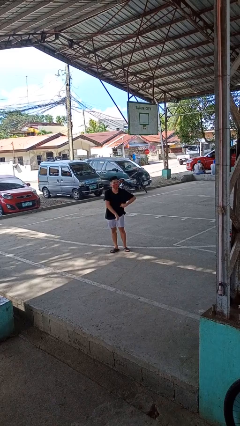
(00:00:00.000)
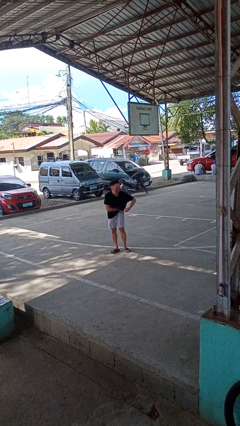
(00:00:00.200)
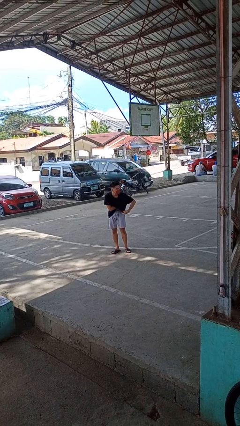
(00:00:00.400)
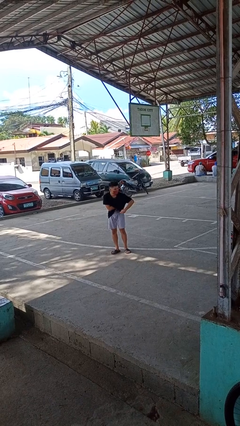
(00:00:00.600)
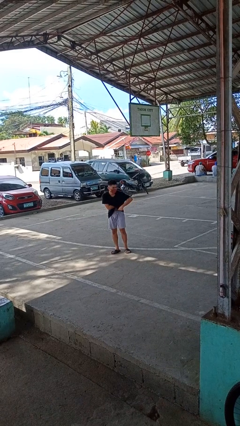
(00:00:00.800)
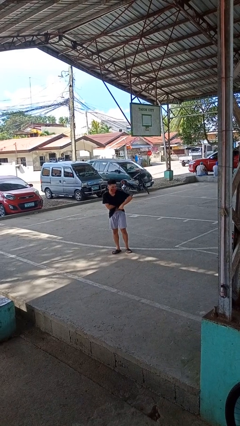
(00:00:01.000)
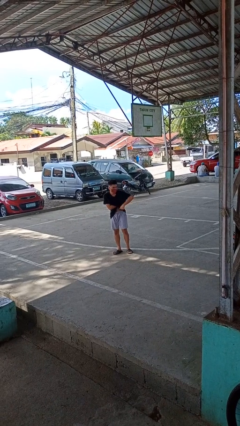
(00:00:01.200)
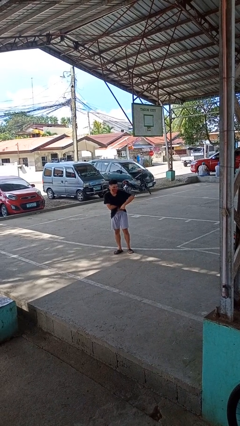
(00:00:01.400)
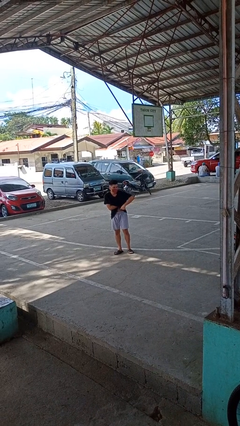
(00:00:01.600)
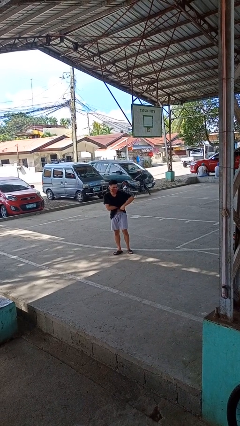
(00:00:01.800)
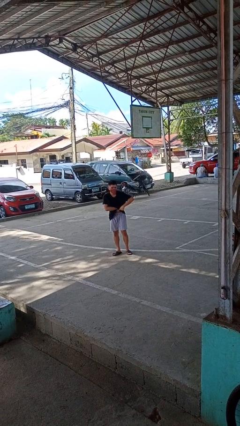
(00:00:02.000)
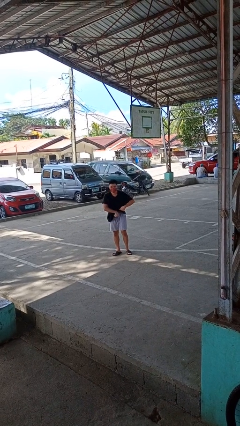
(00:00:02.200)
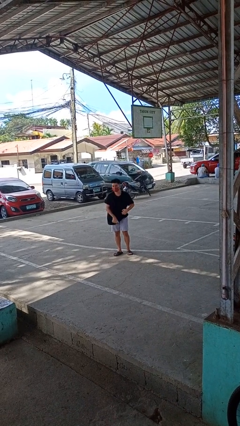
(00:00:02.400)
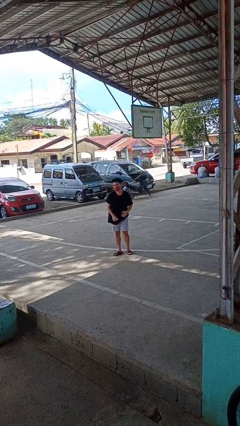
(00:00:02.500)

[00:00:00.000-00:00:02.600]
person applies deodorant

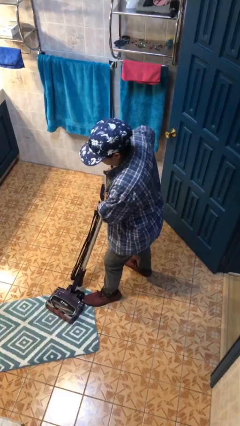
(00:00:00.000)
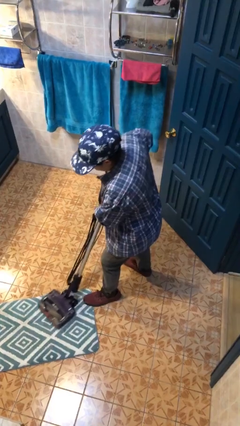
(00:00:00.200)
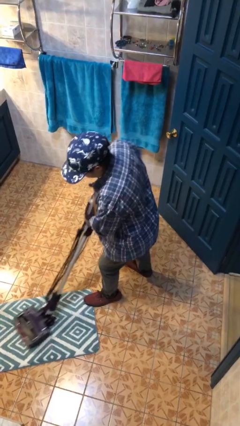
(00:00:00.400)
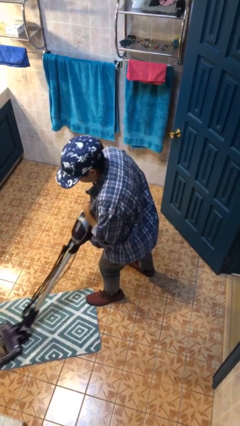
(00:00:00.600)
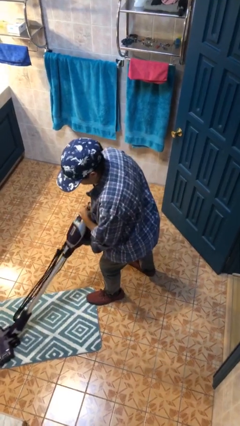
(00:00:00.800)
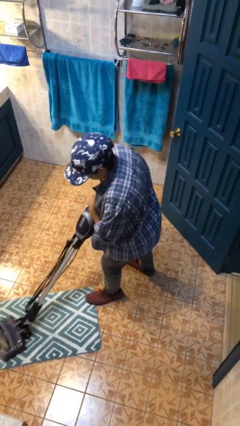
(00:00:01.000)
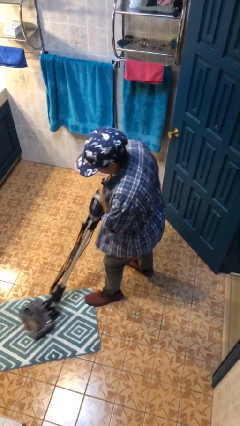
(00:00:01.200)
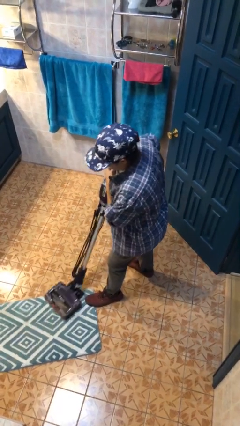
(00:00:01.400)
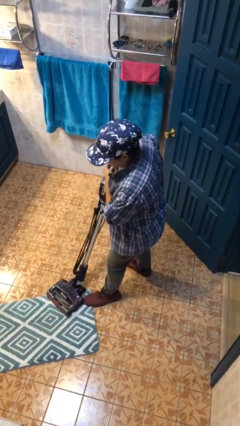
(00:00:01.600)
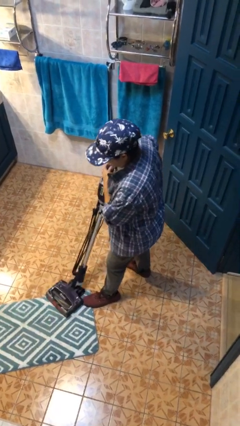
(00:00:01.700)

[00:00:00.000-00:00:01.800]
person vacuums carpet

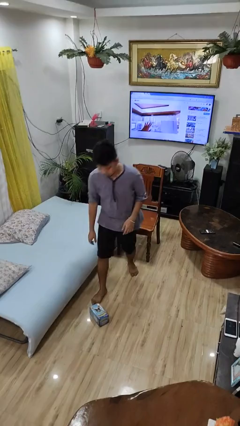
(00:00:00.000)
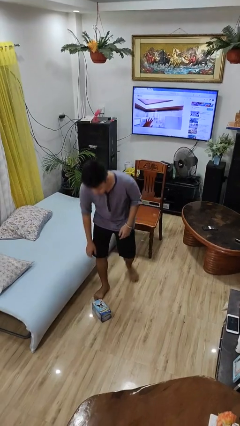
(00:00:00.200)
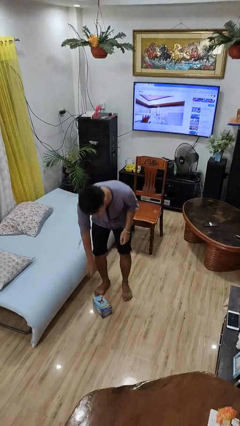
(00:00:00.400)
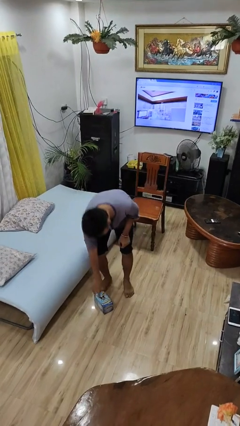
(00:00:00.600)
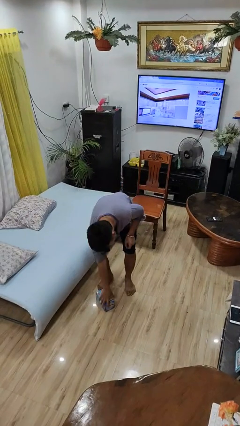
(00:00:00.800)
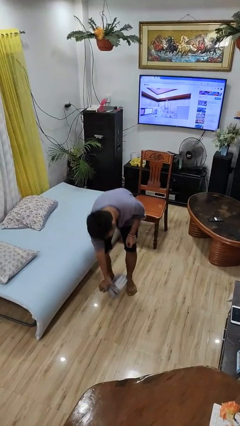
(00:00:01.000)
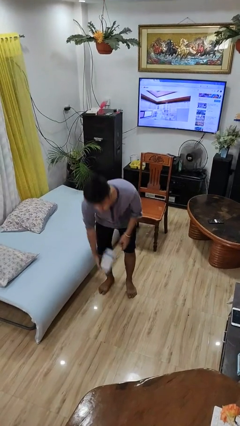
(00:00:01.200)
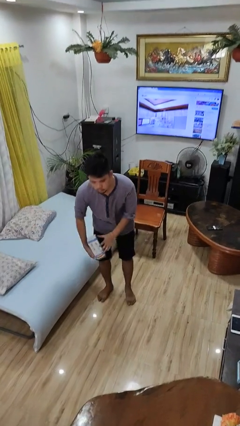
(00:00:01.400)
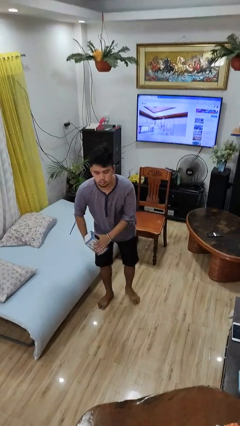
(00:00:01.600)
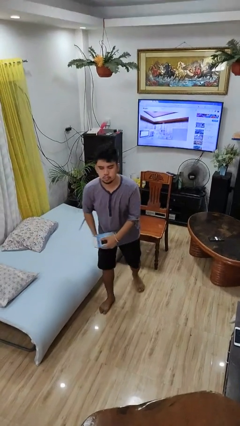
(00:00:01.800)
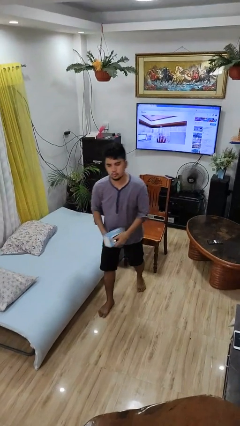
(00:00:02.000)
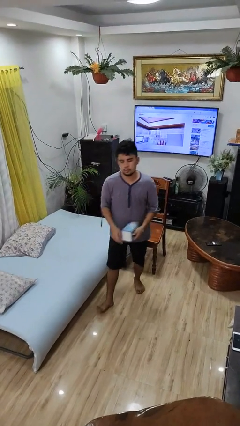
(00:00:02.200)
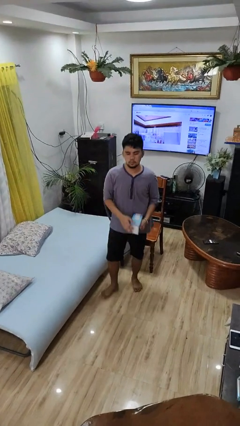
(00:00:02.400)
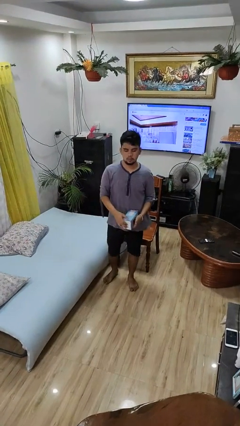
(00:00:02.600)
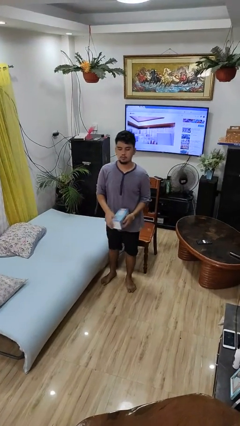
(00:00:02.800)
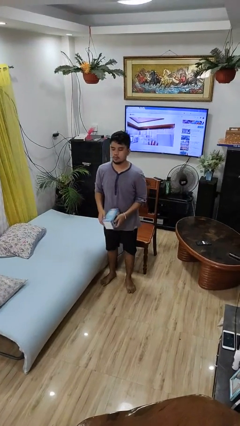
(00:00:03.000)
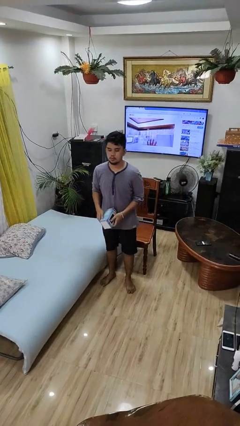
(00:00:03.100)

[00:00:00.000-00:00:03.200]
person picks up object from floor

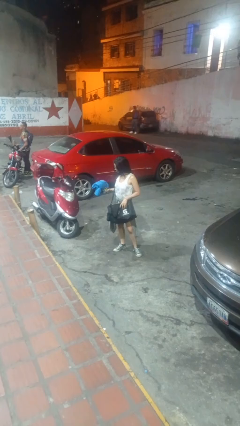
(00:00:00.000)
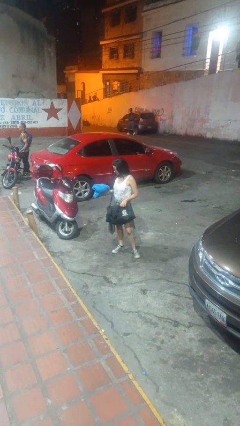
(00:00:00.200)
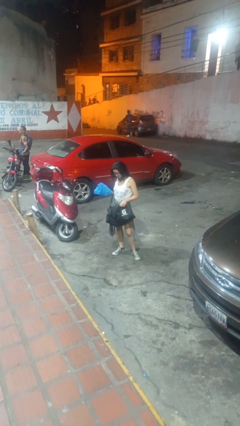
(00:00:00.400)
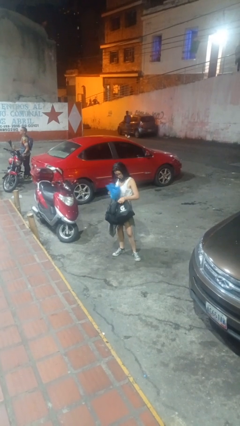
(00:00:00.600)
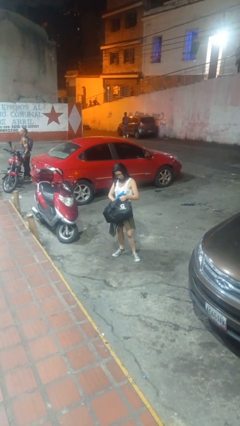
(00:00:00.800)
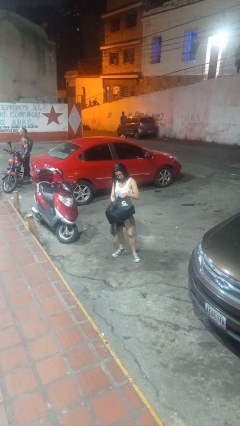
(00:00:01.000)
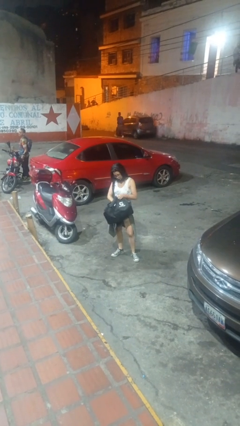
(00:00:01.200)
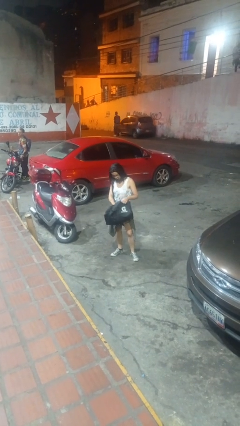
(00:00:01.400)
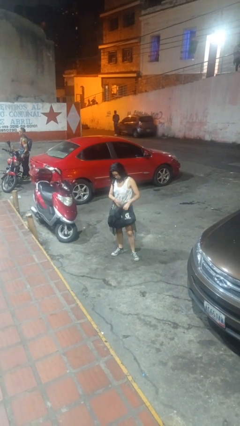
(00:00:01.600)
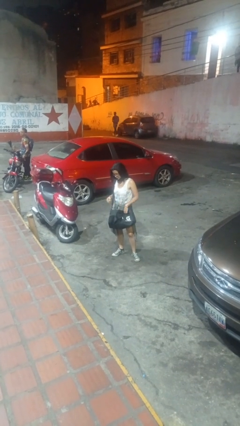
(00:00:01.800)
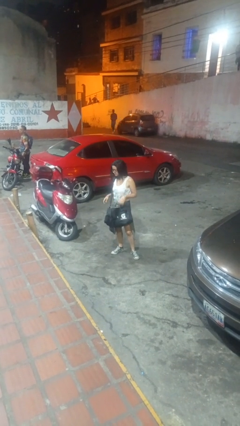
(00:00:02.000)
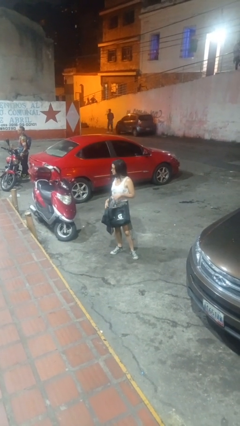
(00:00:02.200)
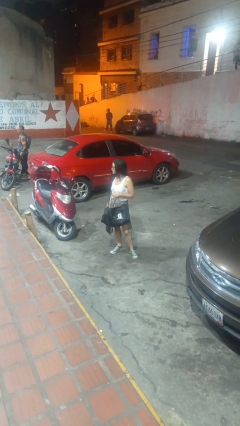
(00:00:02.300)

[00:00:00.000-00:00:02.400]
person puts object into purse

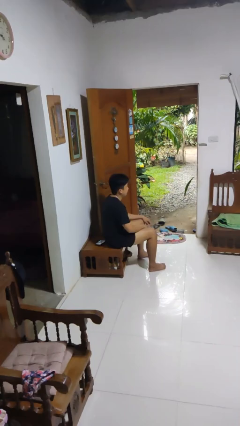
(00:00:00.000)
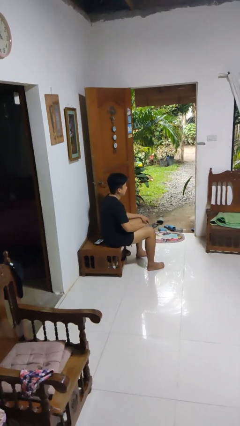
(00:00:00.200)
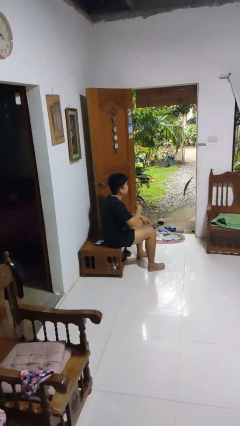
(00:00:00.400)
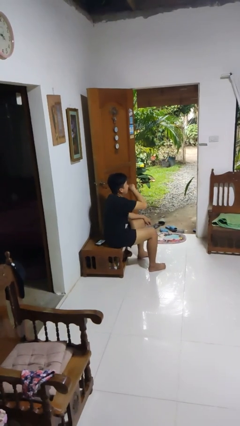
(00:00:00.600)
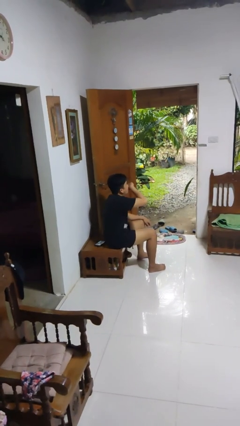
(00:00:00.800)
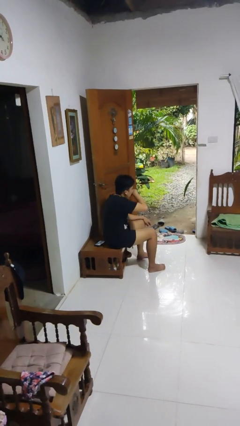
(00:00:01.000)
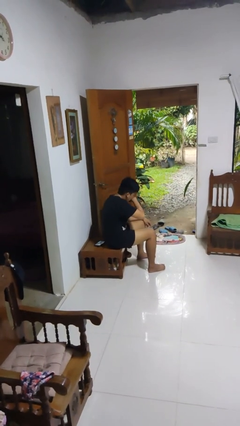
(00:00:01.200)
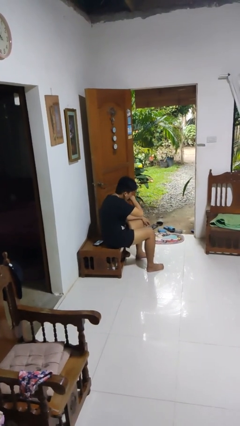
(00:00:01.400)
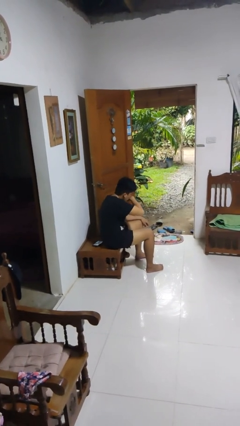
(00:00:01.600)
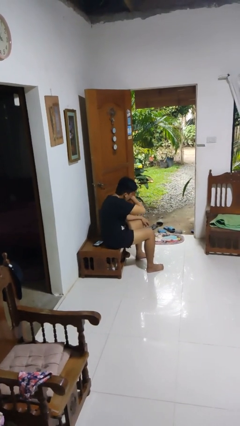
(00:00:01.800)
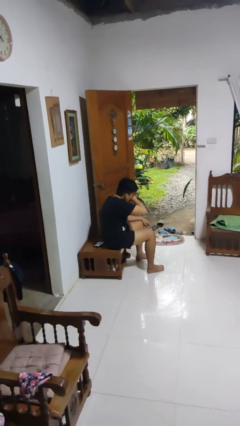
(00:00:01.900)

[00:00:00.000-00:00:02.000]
person sneezes into arm

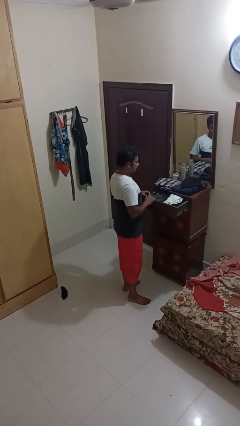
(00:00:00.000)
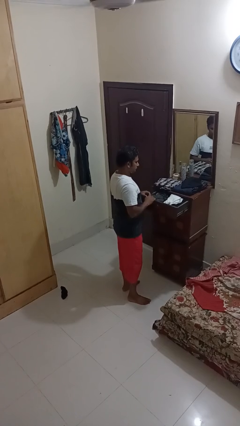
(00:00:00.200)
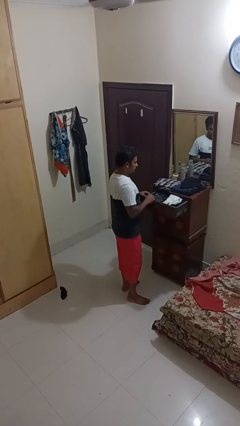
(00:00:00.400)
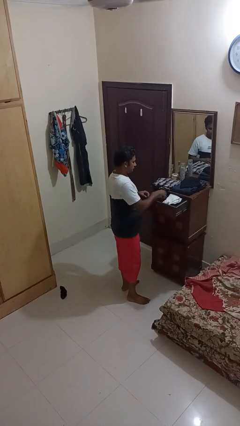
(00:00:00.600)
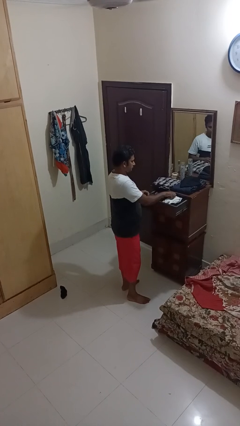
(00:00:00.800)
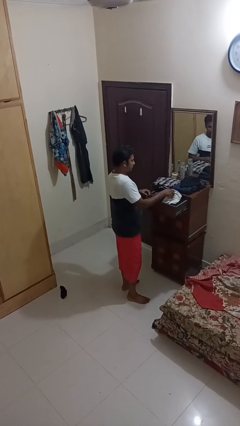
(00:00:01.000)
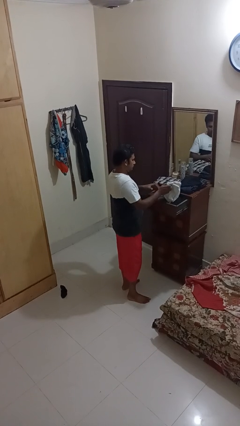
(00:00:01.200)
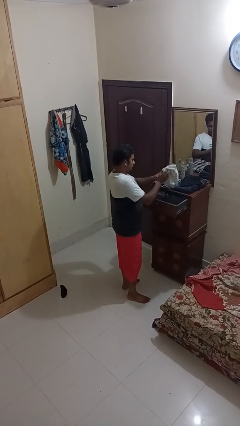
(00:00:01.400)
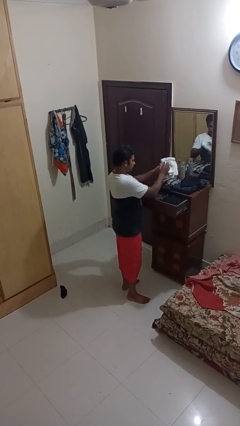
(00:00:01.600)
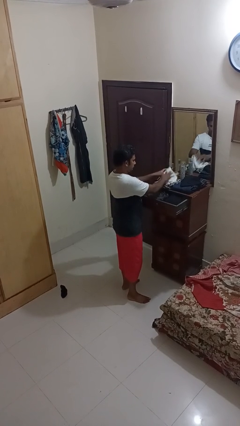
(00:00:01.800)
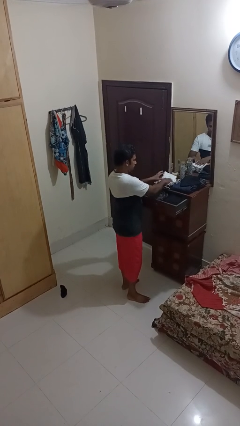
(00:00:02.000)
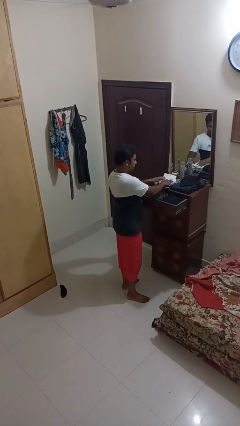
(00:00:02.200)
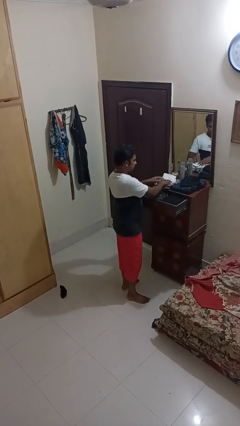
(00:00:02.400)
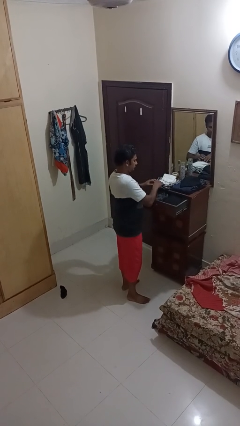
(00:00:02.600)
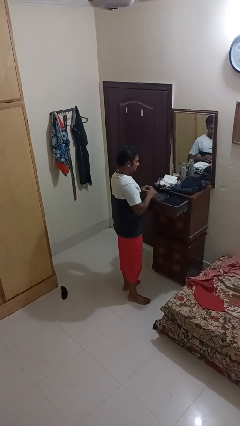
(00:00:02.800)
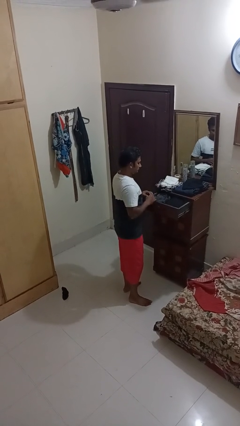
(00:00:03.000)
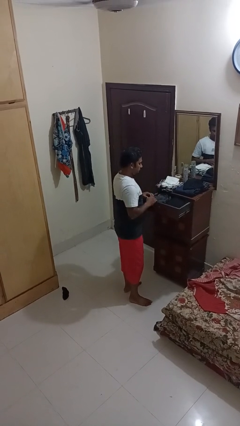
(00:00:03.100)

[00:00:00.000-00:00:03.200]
person takes clothes from dresser

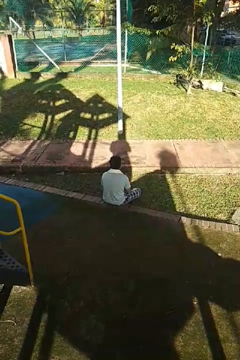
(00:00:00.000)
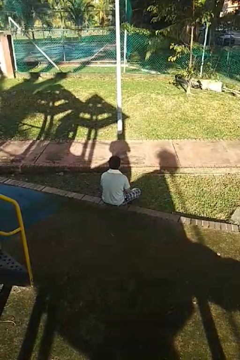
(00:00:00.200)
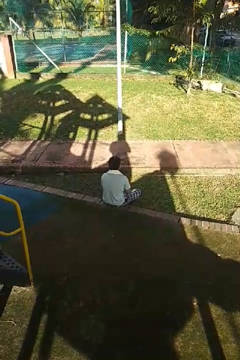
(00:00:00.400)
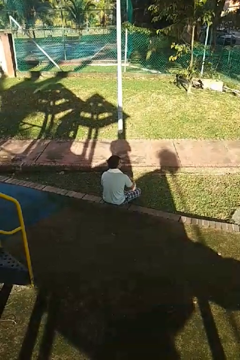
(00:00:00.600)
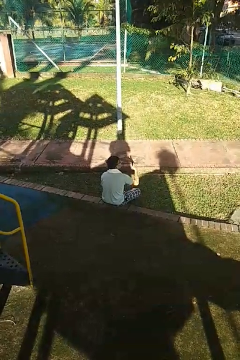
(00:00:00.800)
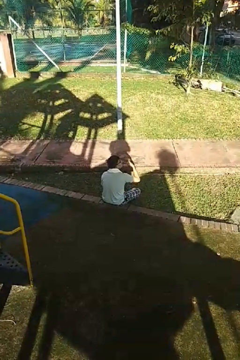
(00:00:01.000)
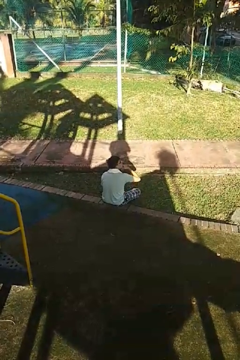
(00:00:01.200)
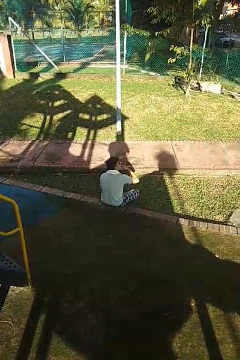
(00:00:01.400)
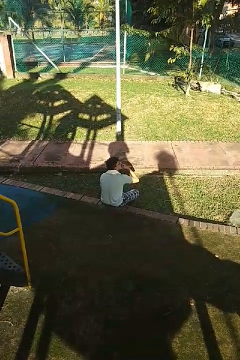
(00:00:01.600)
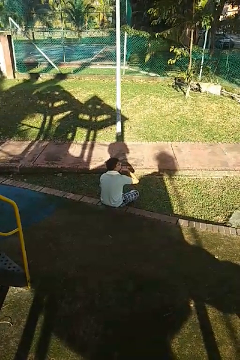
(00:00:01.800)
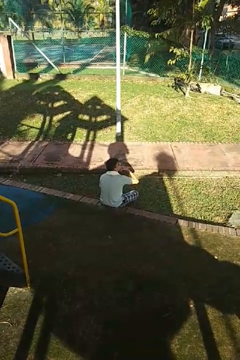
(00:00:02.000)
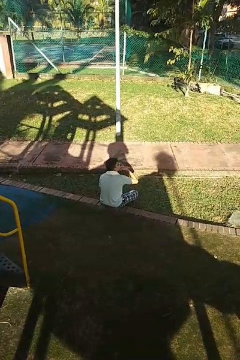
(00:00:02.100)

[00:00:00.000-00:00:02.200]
person strokes chin
